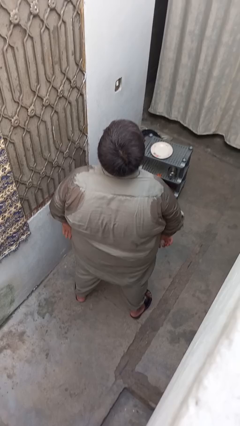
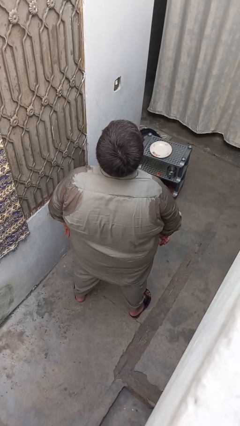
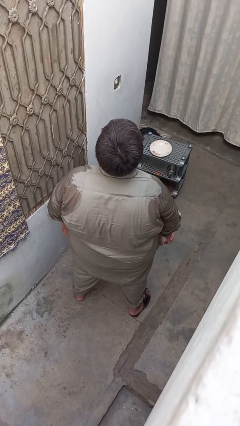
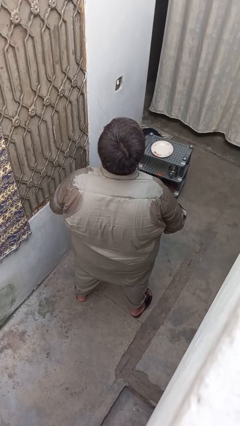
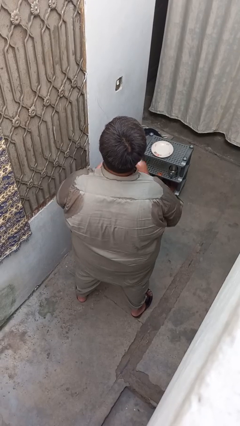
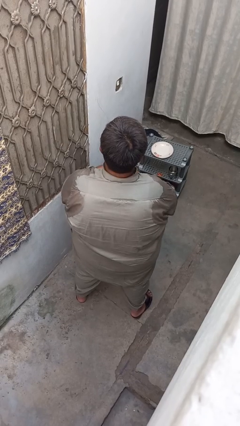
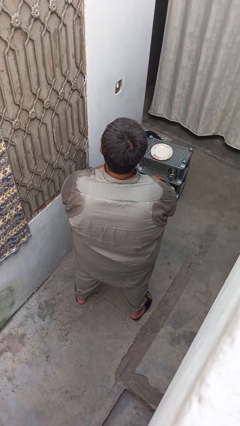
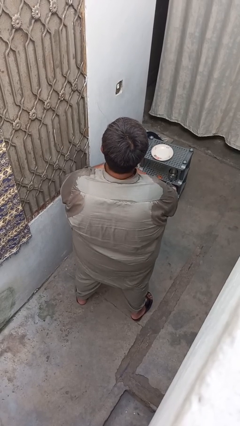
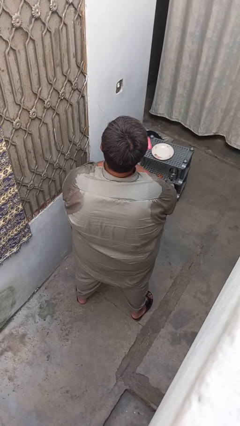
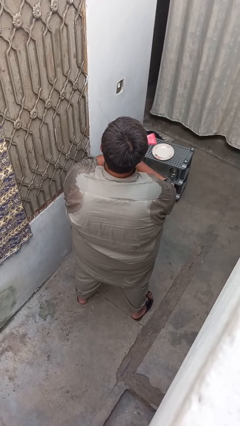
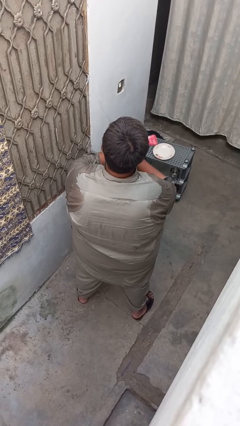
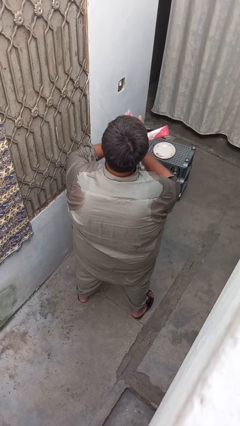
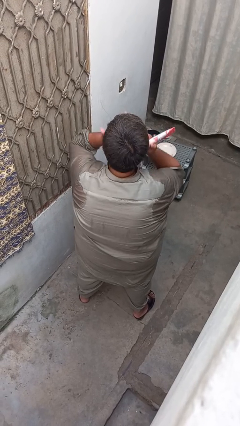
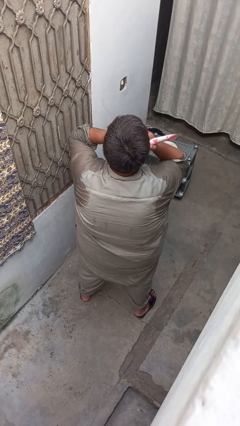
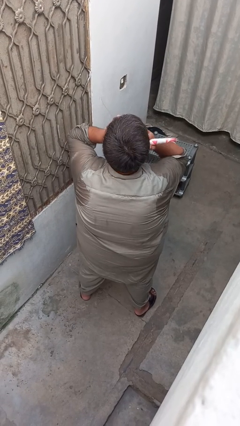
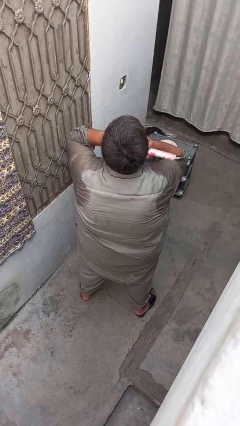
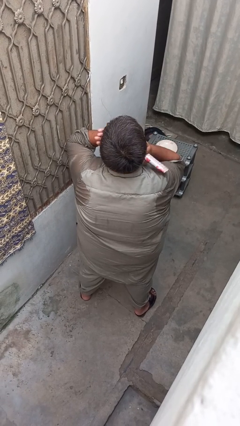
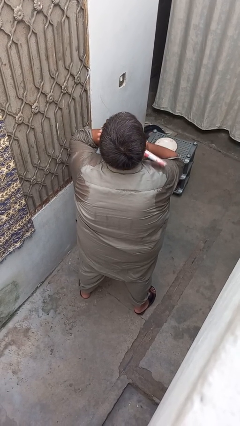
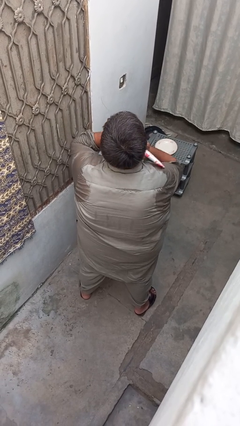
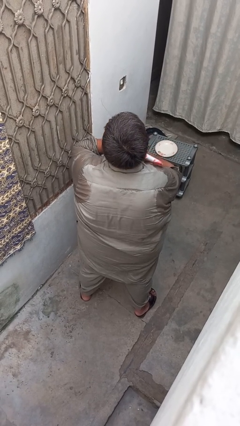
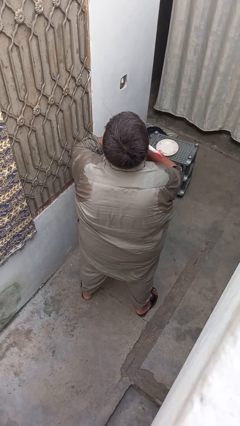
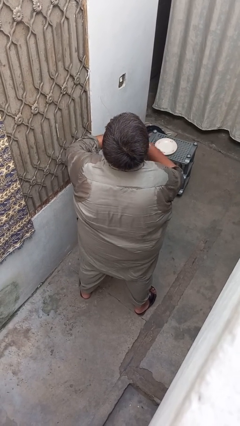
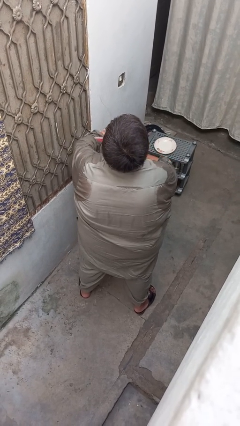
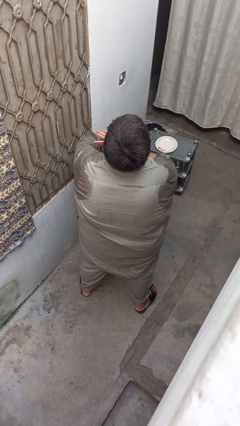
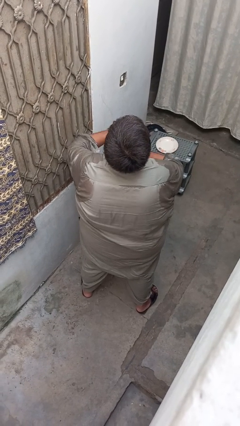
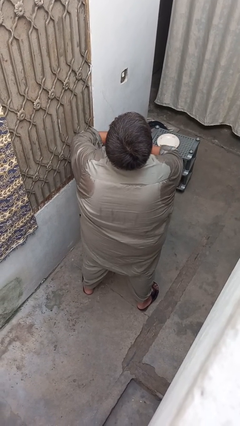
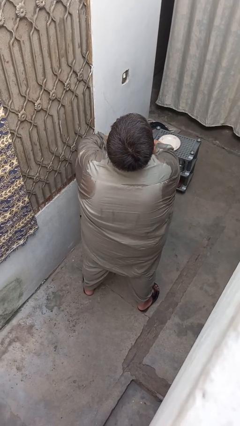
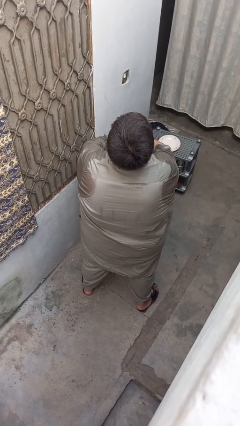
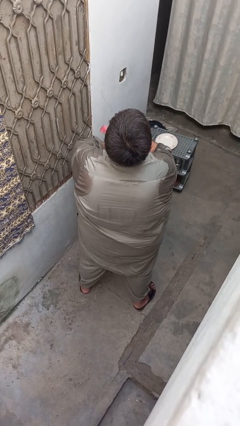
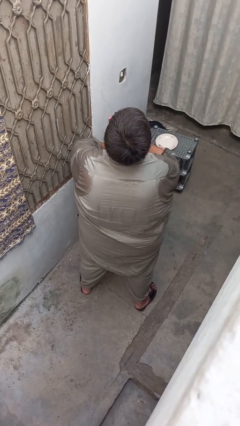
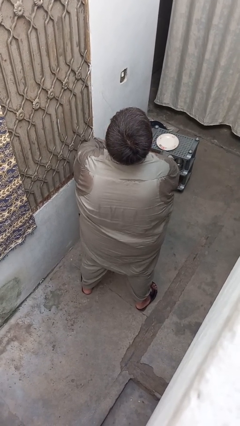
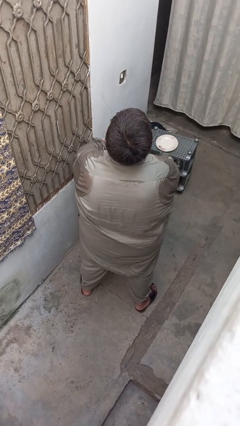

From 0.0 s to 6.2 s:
person applies sunscreen

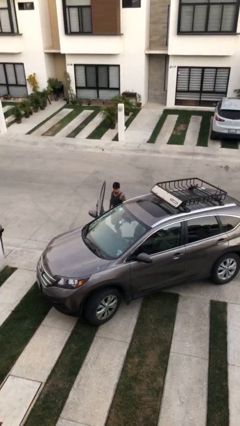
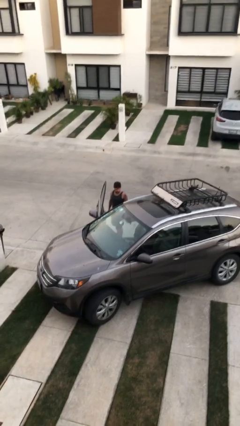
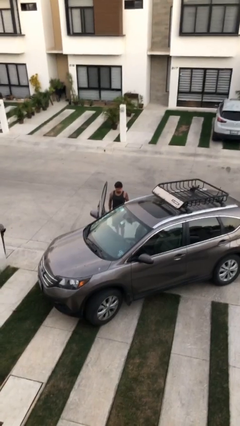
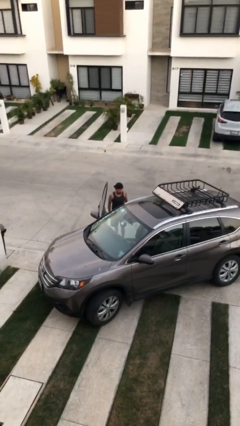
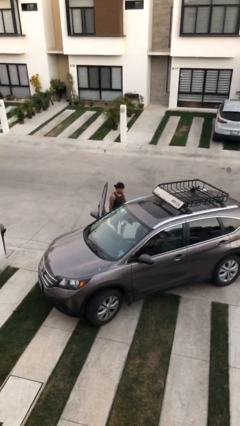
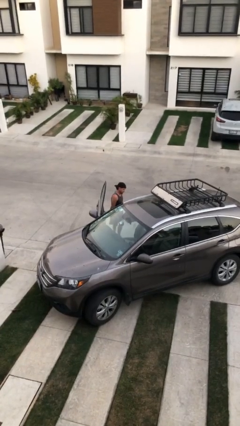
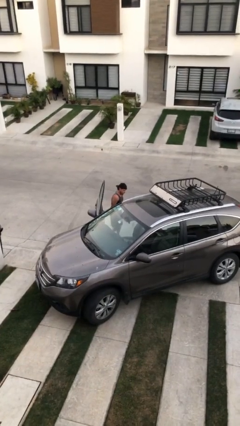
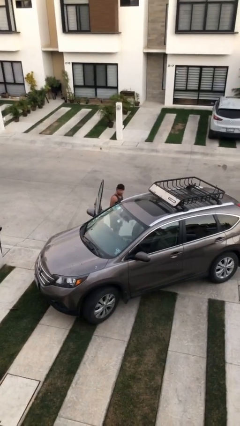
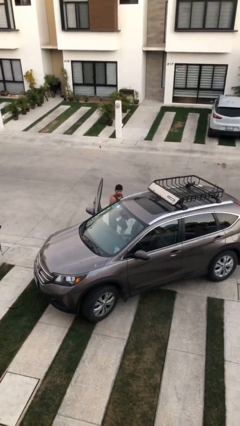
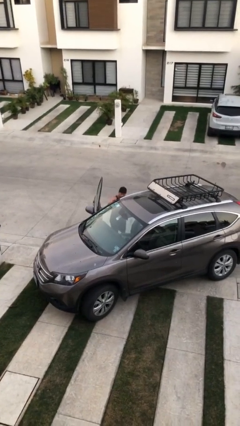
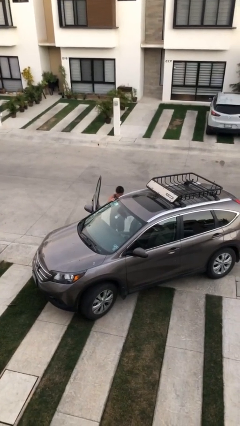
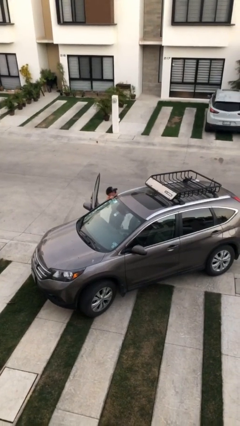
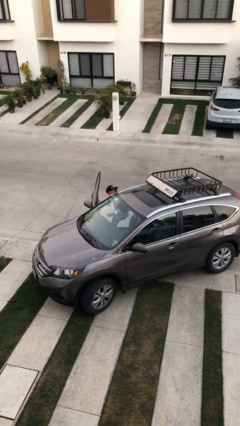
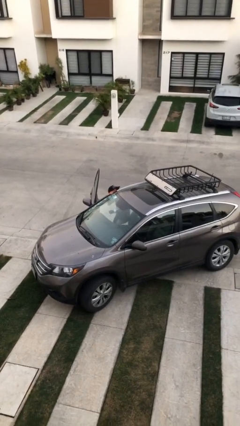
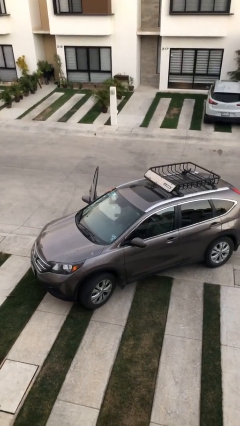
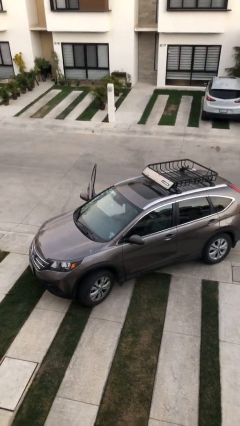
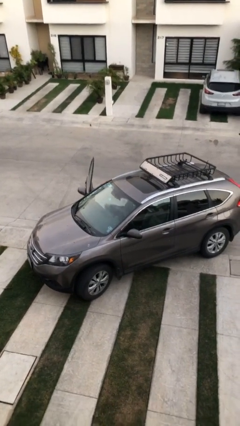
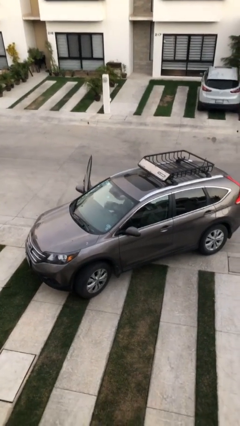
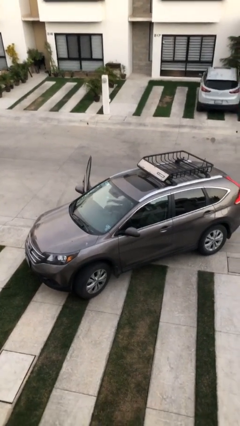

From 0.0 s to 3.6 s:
person enters car

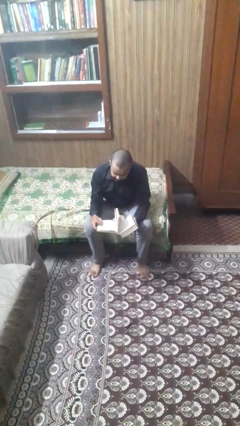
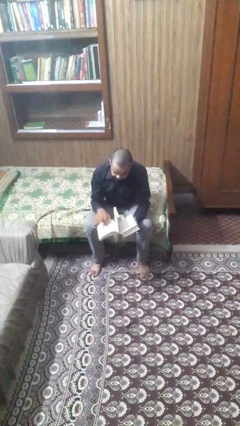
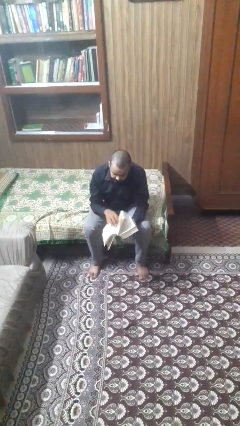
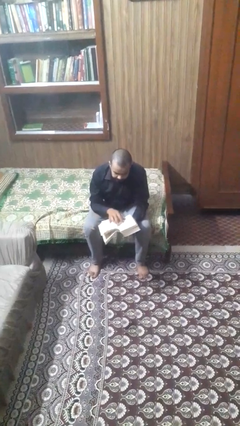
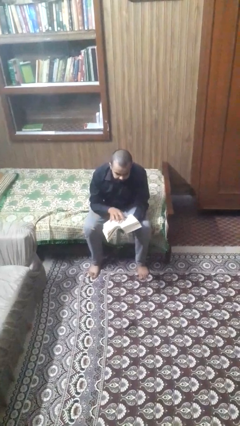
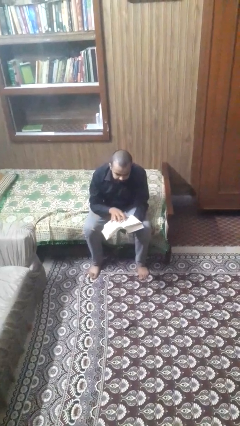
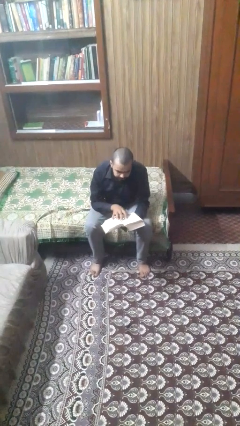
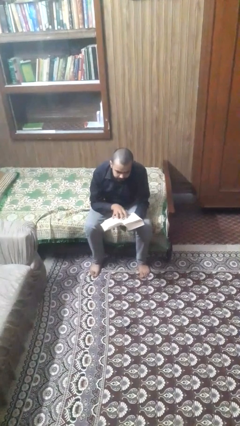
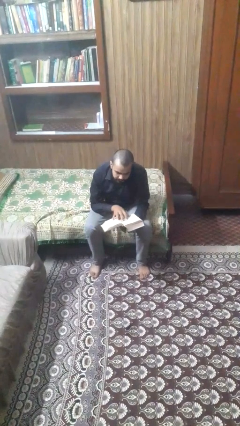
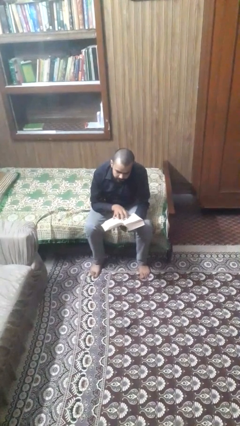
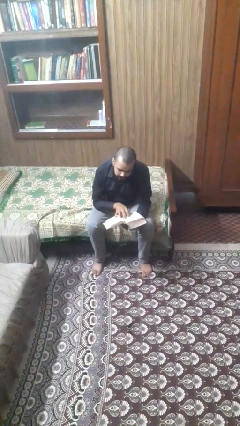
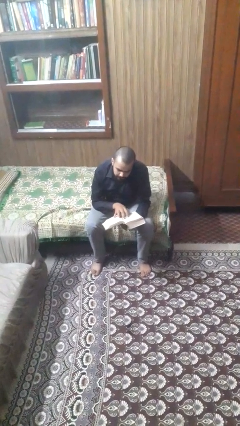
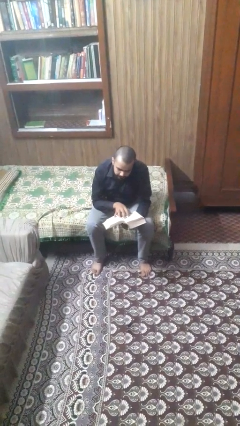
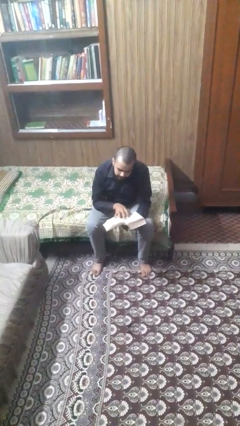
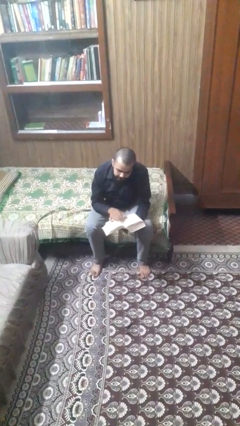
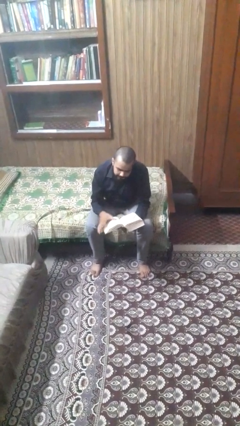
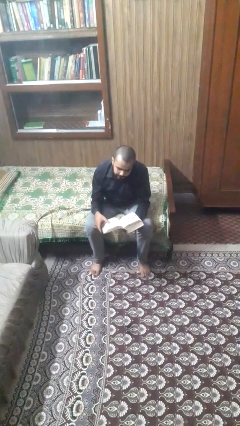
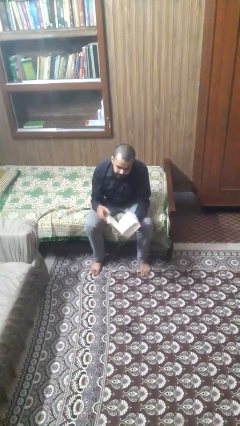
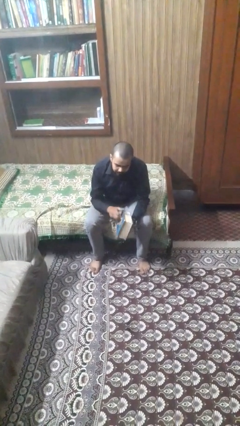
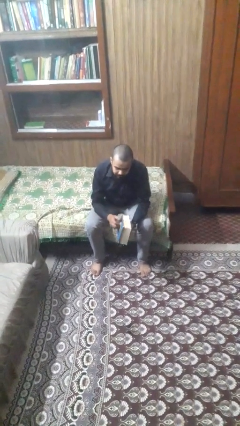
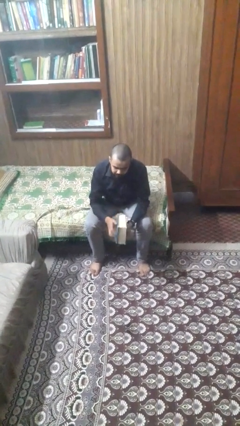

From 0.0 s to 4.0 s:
person reads book

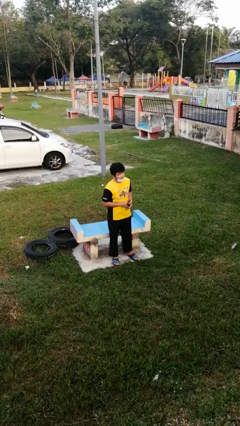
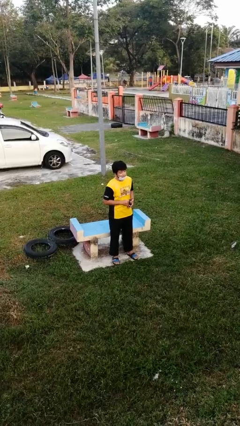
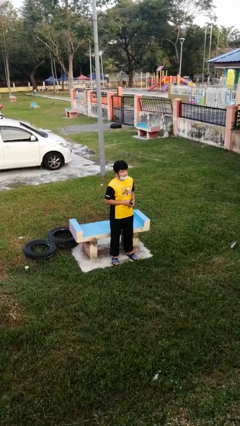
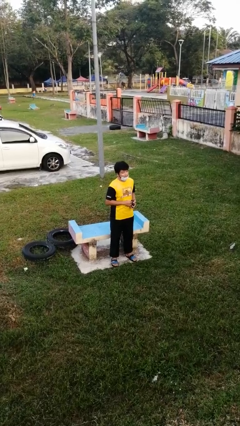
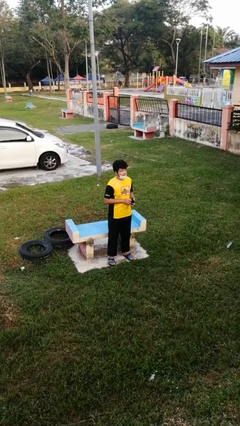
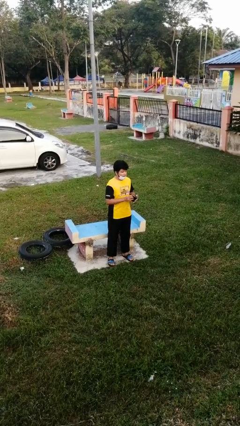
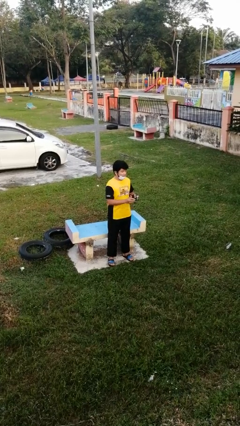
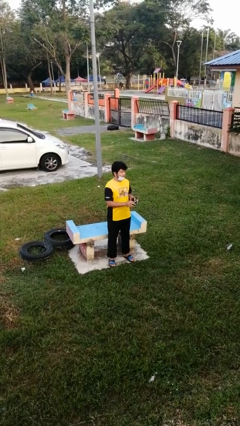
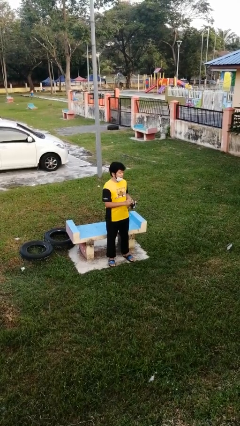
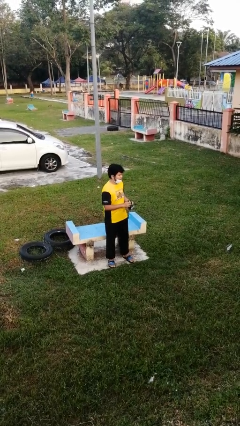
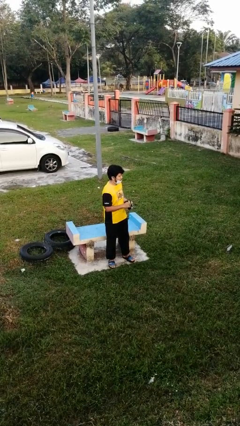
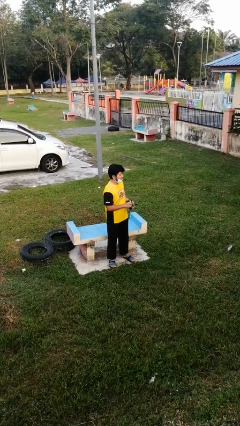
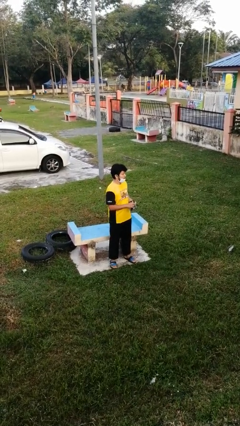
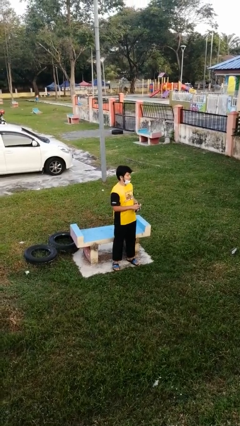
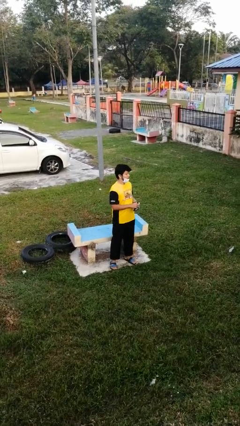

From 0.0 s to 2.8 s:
person searches in purse

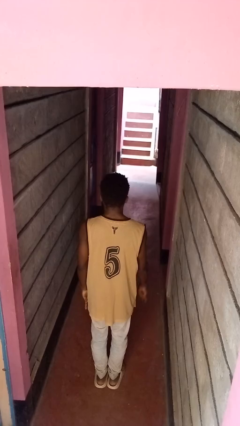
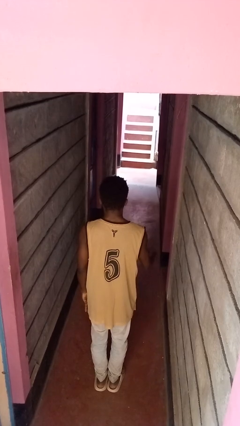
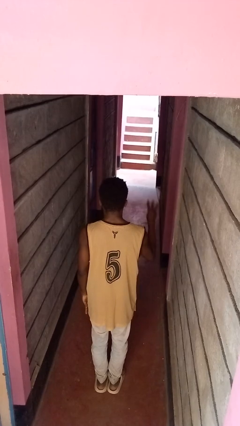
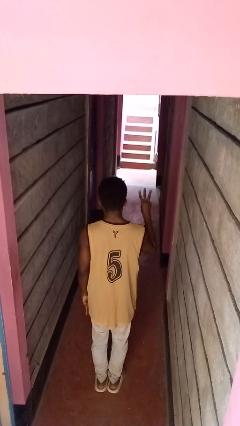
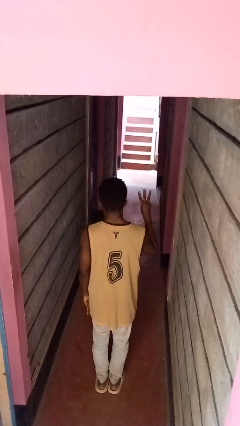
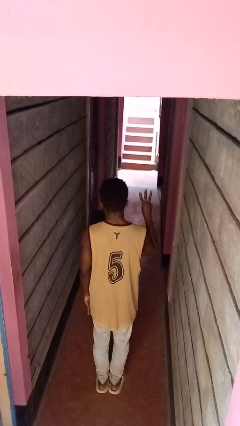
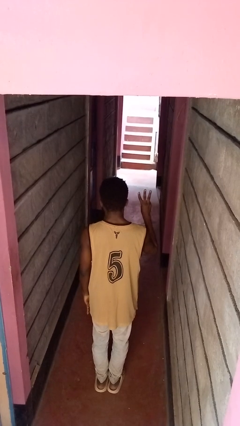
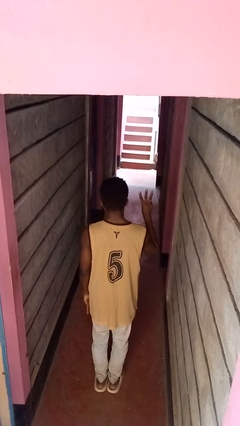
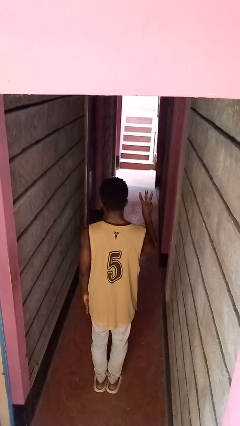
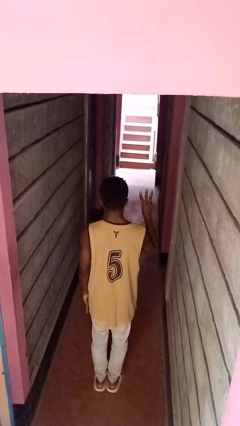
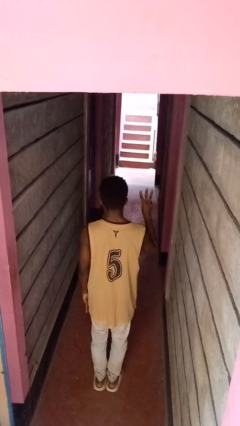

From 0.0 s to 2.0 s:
person gestures number three
